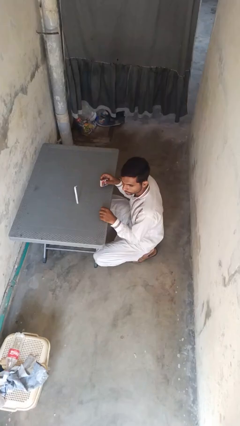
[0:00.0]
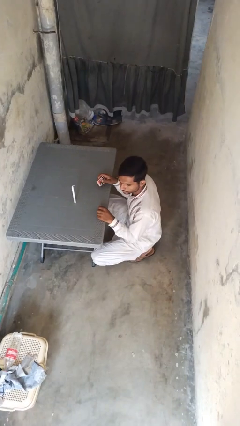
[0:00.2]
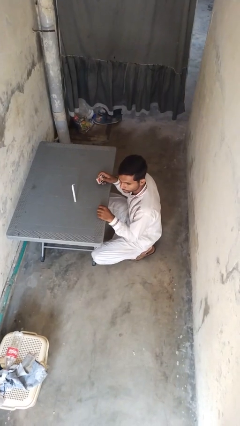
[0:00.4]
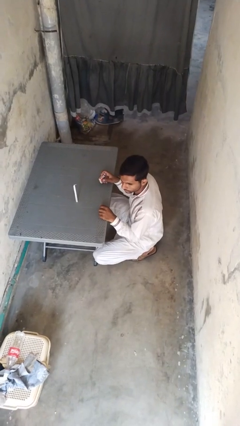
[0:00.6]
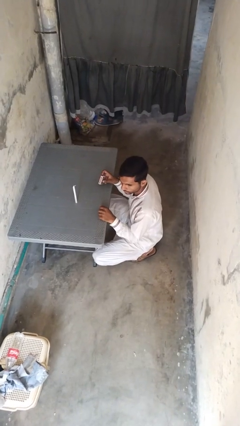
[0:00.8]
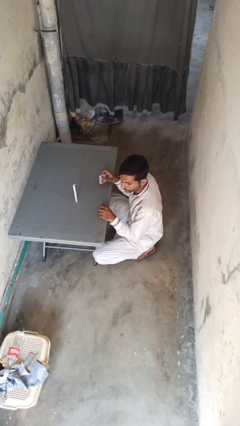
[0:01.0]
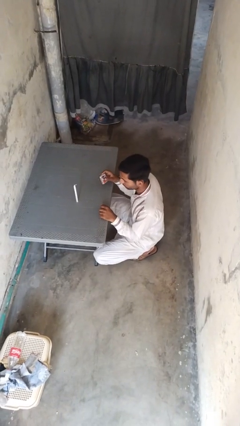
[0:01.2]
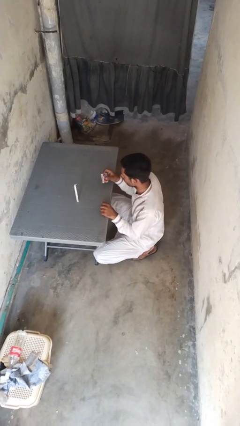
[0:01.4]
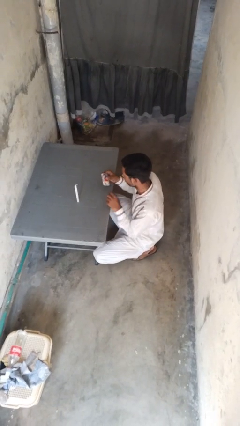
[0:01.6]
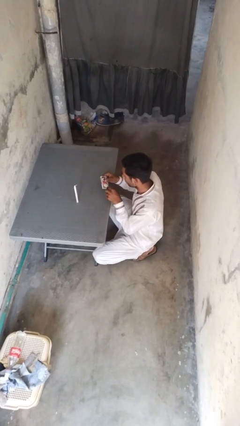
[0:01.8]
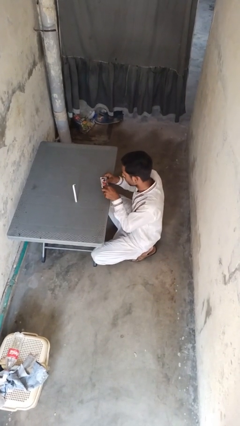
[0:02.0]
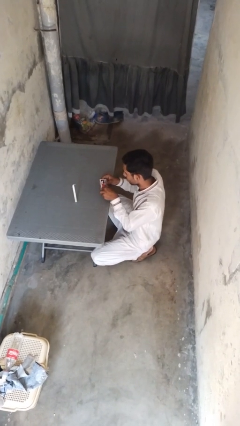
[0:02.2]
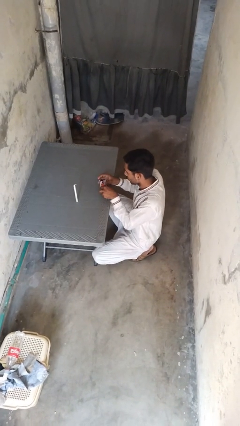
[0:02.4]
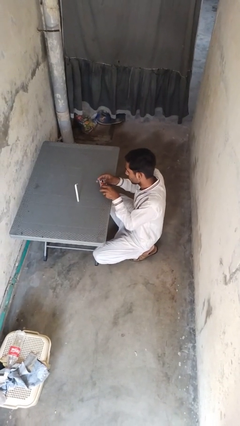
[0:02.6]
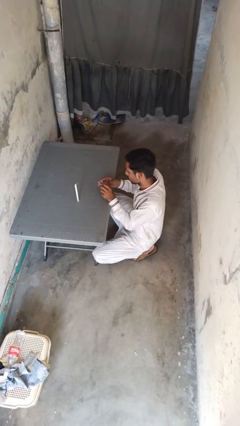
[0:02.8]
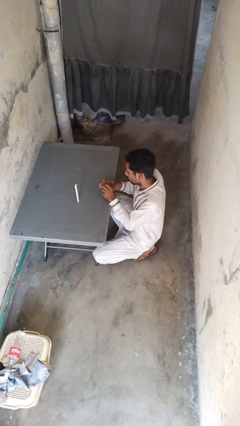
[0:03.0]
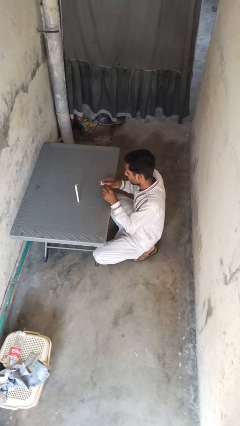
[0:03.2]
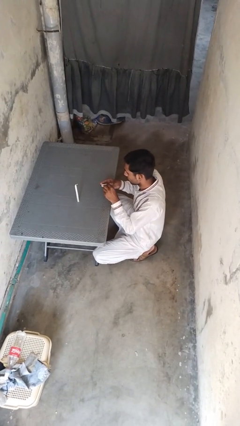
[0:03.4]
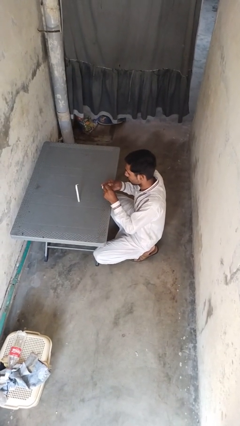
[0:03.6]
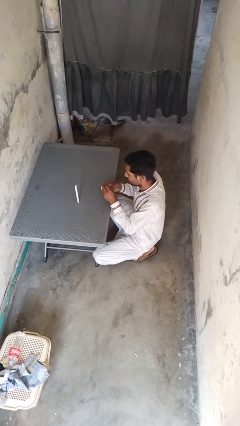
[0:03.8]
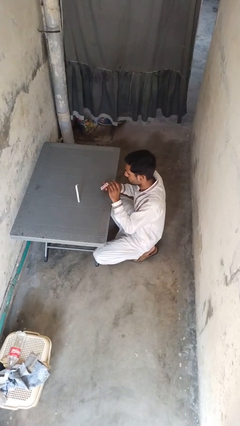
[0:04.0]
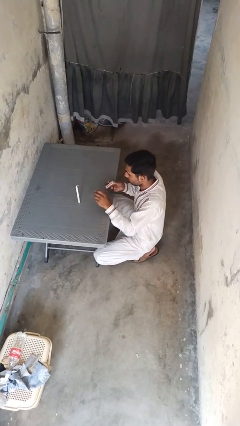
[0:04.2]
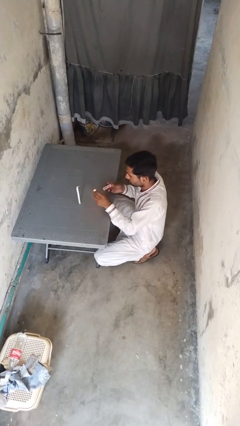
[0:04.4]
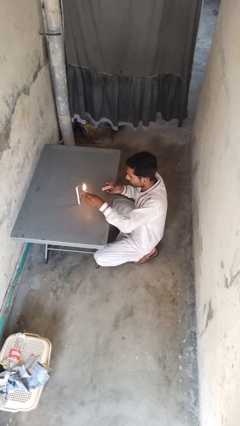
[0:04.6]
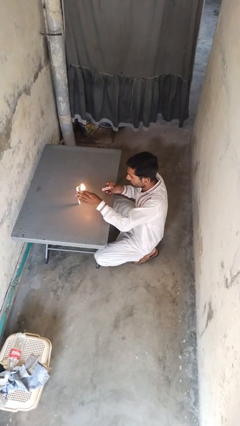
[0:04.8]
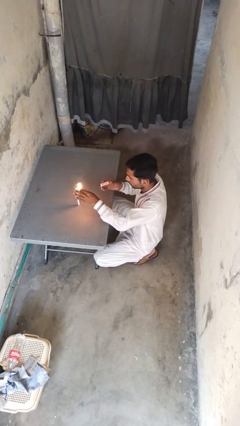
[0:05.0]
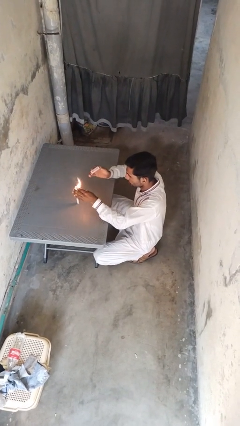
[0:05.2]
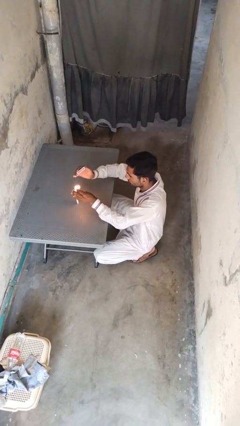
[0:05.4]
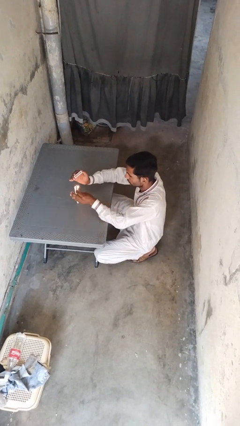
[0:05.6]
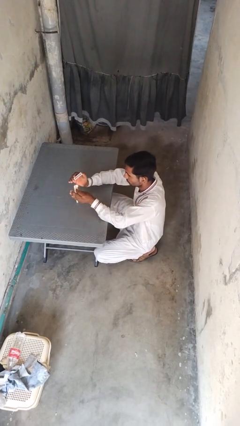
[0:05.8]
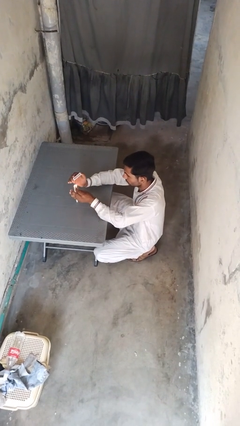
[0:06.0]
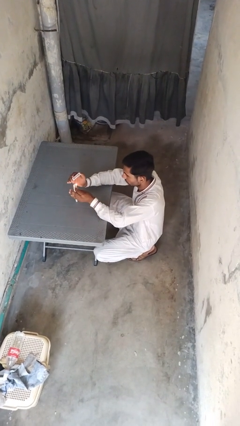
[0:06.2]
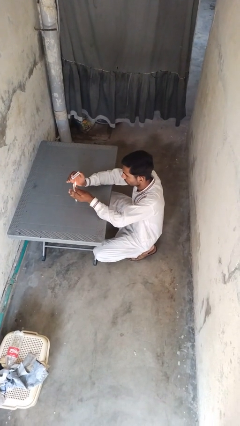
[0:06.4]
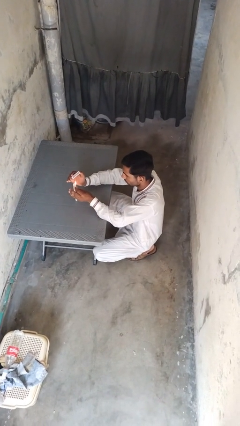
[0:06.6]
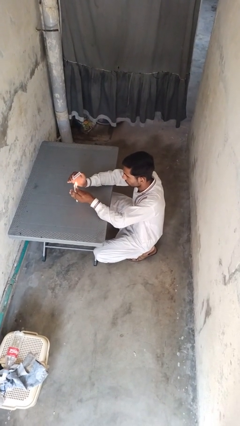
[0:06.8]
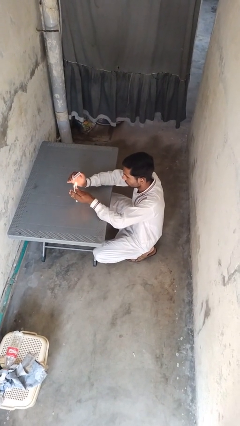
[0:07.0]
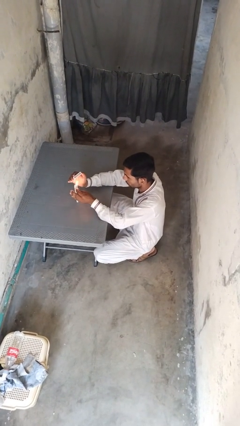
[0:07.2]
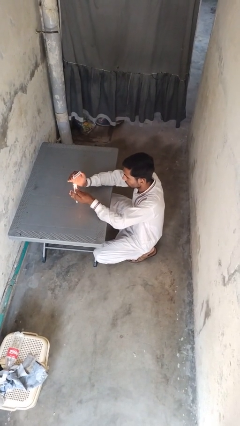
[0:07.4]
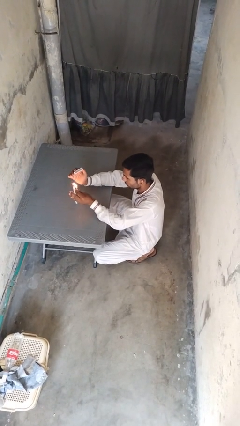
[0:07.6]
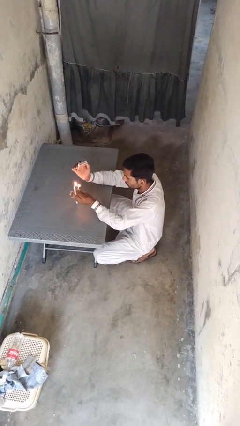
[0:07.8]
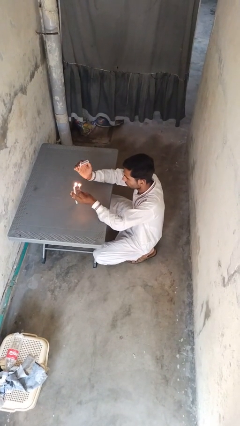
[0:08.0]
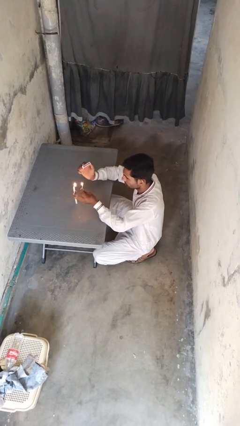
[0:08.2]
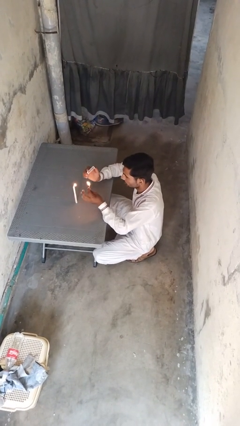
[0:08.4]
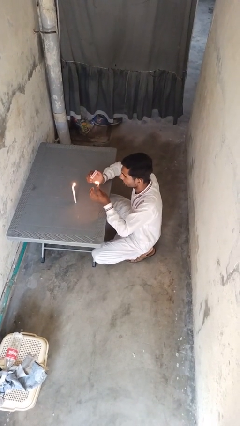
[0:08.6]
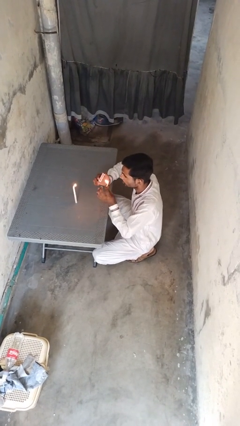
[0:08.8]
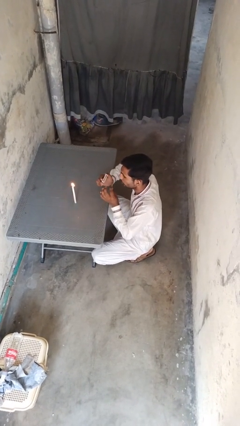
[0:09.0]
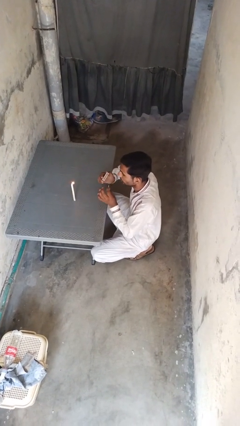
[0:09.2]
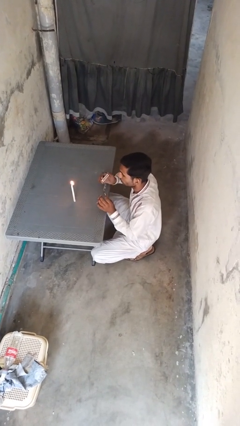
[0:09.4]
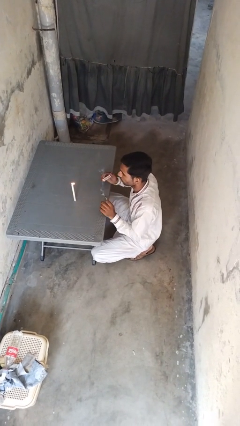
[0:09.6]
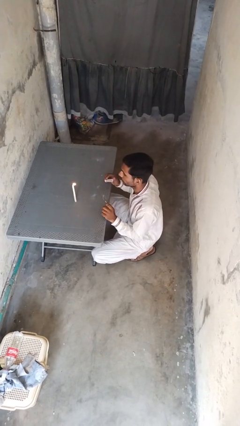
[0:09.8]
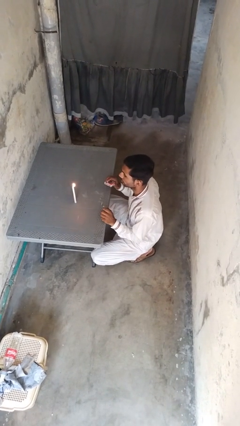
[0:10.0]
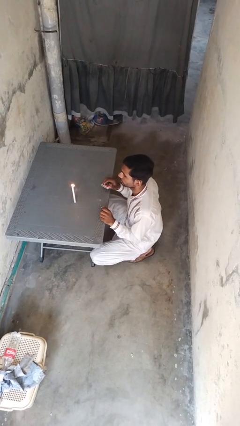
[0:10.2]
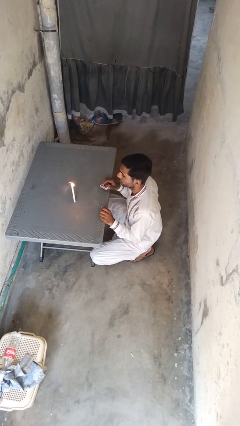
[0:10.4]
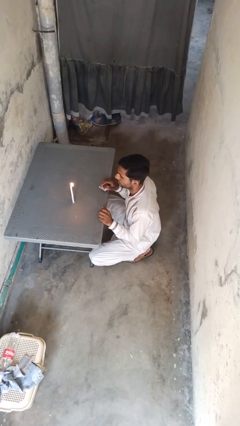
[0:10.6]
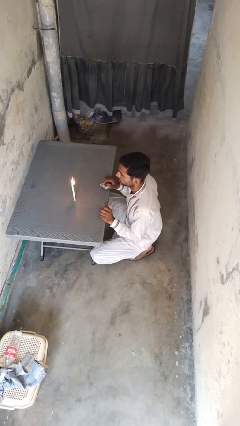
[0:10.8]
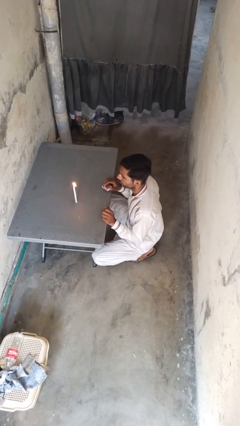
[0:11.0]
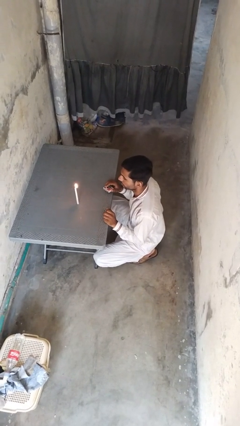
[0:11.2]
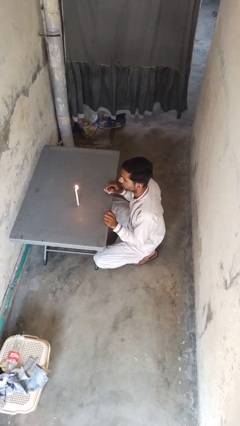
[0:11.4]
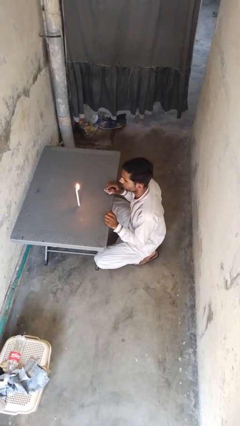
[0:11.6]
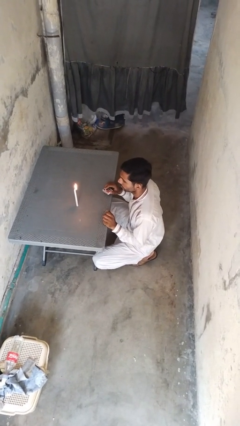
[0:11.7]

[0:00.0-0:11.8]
person lights candle

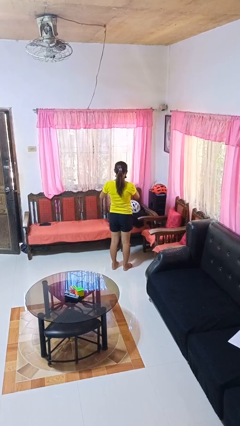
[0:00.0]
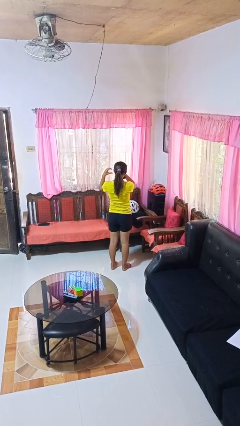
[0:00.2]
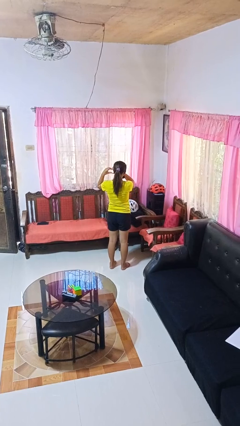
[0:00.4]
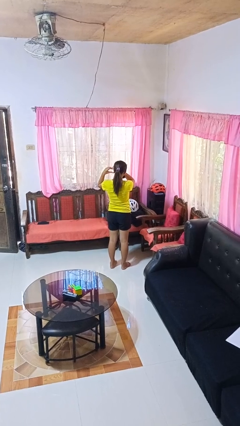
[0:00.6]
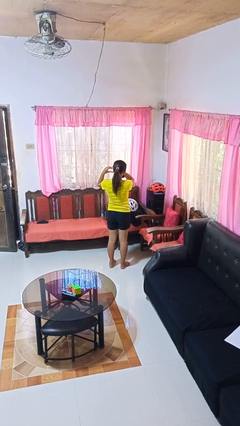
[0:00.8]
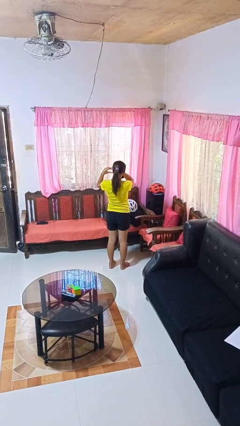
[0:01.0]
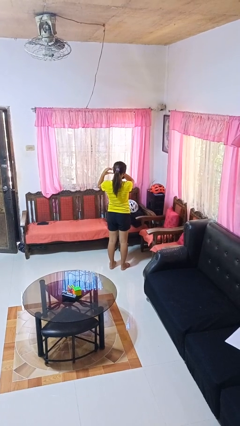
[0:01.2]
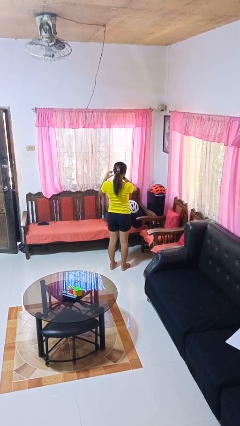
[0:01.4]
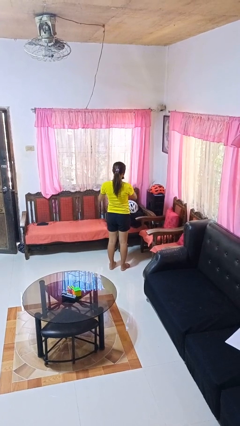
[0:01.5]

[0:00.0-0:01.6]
person gestures heart

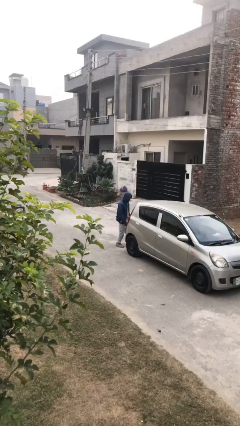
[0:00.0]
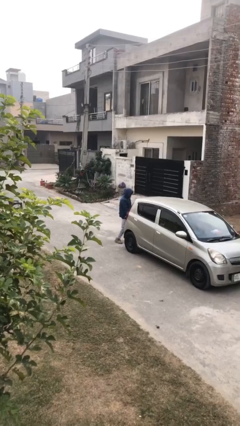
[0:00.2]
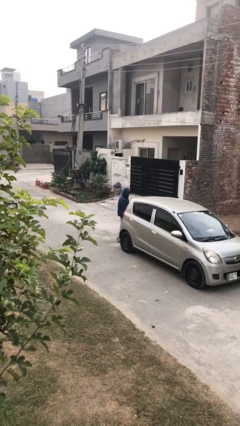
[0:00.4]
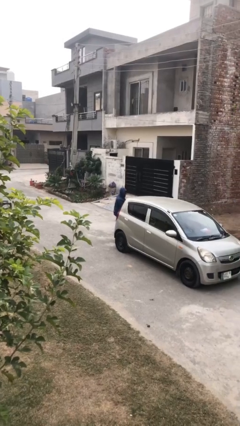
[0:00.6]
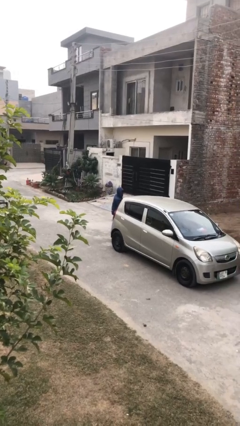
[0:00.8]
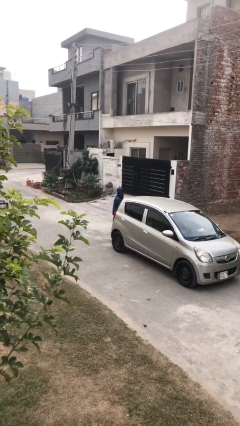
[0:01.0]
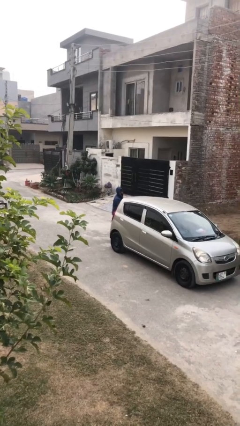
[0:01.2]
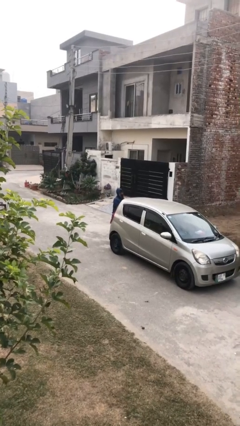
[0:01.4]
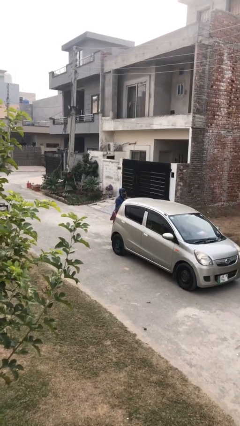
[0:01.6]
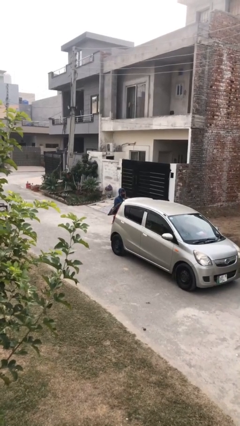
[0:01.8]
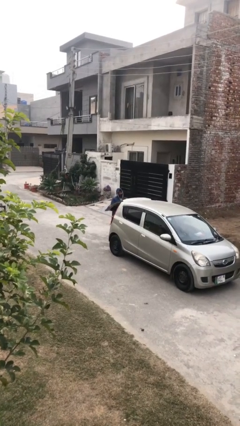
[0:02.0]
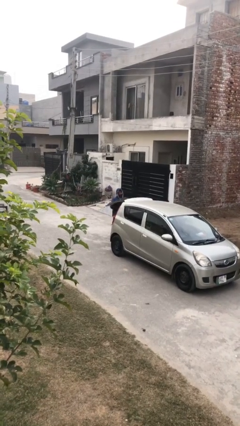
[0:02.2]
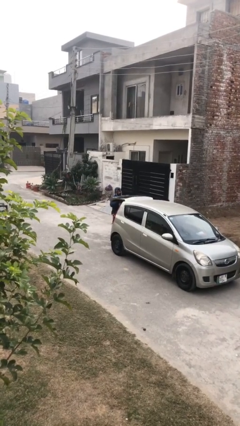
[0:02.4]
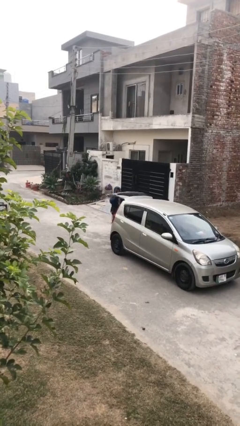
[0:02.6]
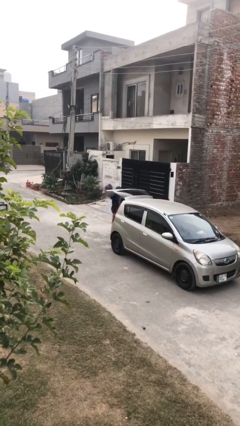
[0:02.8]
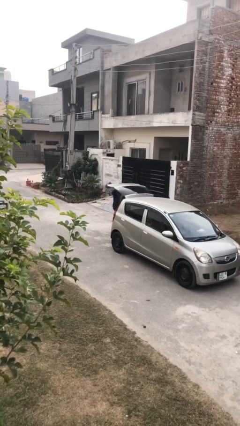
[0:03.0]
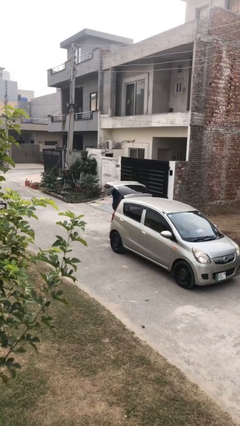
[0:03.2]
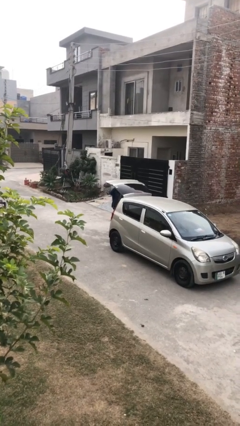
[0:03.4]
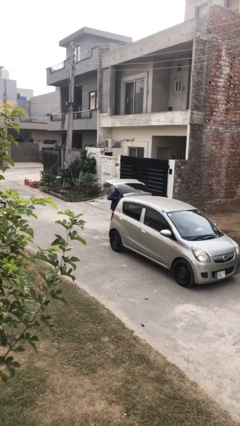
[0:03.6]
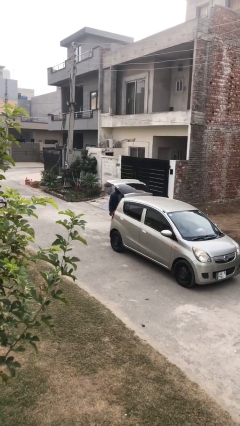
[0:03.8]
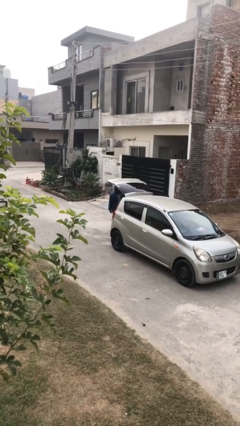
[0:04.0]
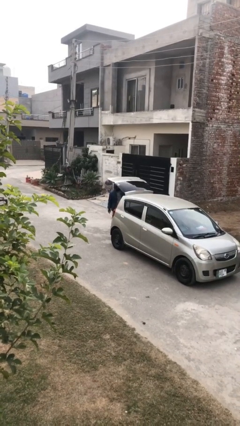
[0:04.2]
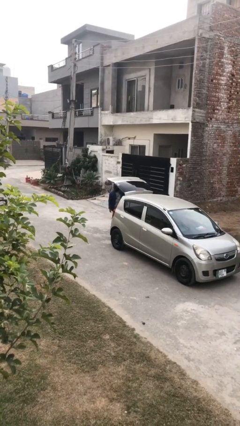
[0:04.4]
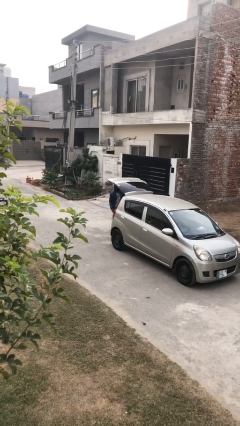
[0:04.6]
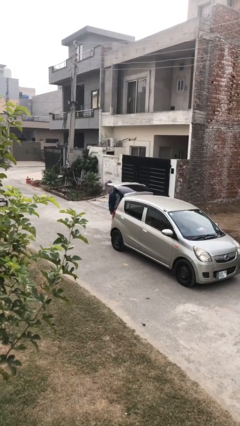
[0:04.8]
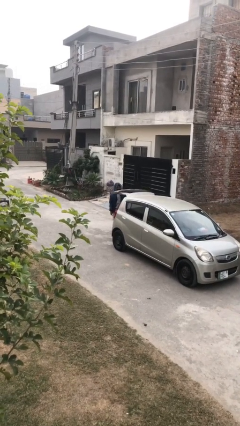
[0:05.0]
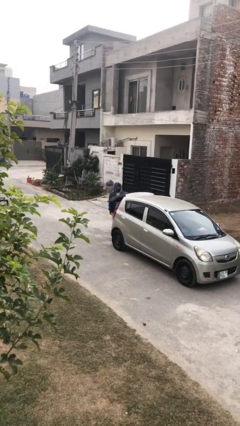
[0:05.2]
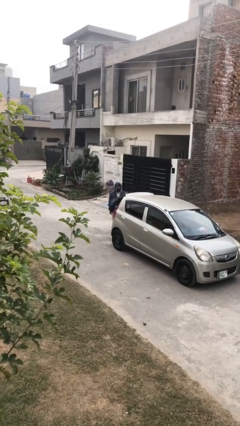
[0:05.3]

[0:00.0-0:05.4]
person opens car trunk
